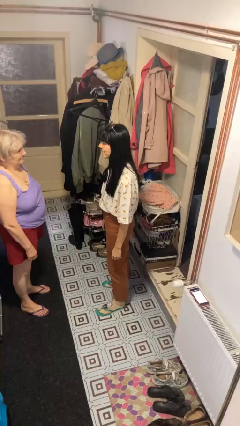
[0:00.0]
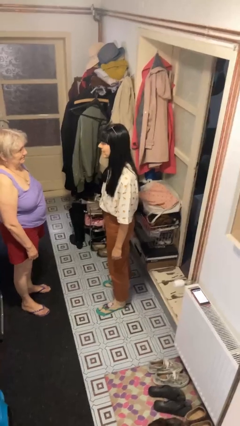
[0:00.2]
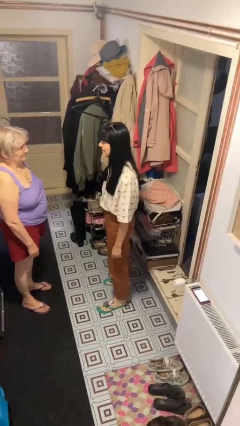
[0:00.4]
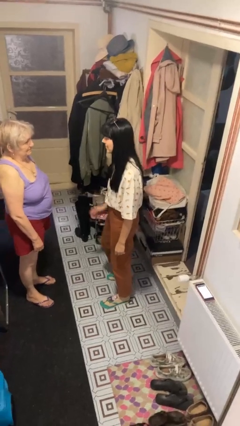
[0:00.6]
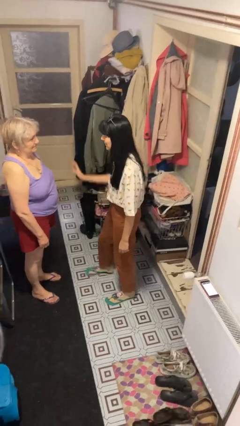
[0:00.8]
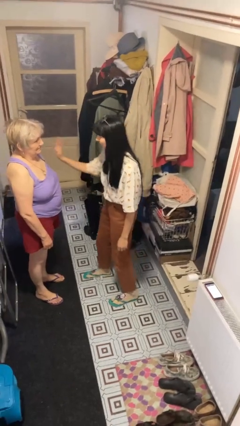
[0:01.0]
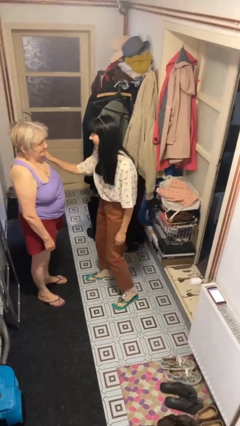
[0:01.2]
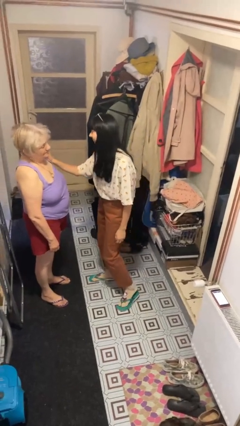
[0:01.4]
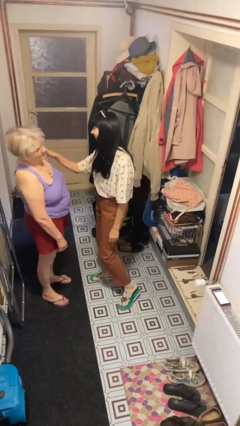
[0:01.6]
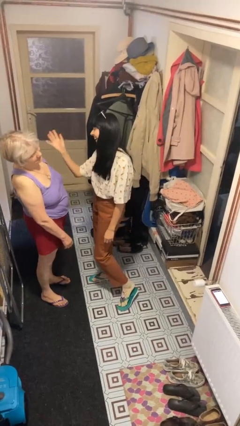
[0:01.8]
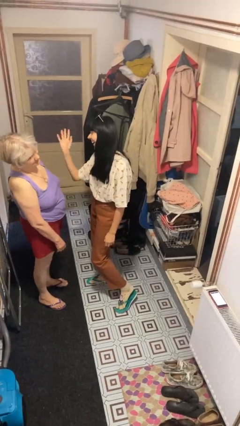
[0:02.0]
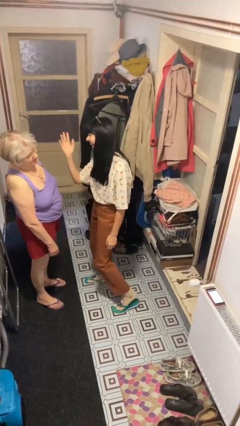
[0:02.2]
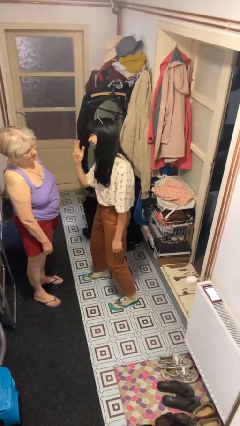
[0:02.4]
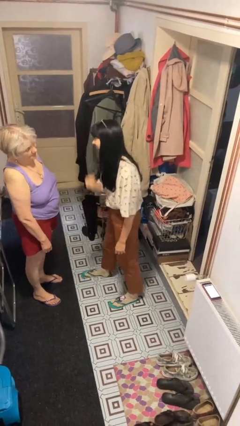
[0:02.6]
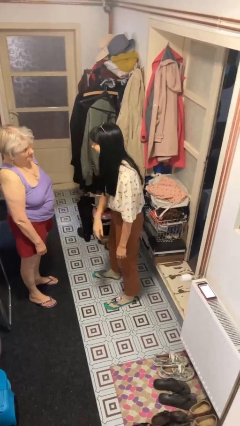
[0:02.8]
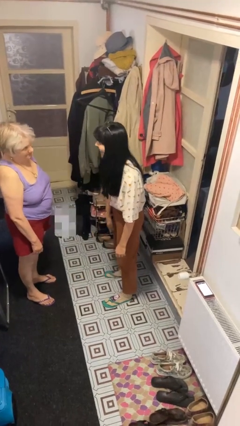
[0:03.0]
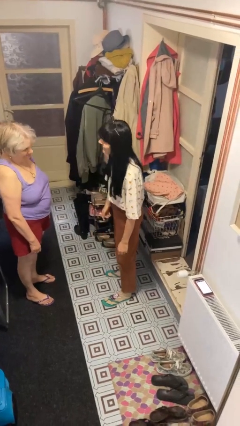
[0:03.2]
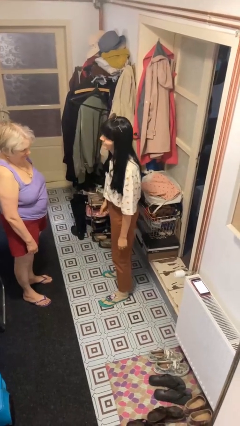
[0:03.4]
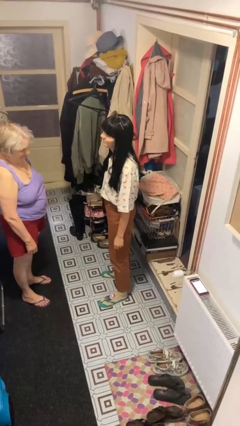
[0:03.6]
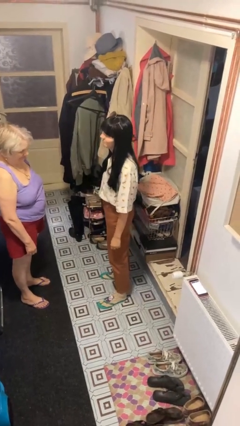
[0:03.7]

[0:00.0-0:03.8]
person shoves person

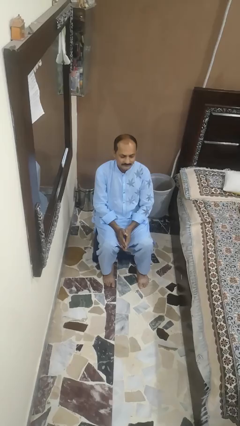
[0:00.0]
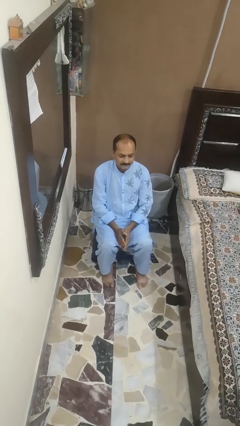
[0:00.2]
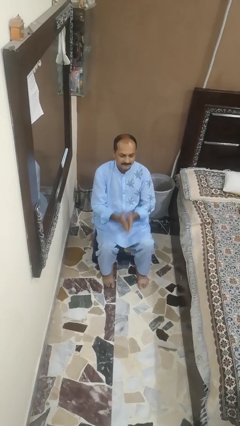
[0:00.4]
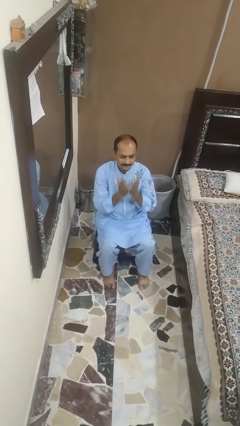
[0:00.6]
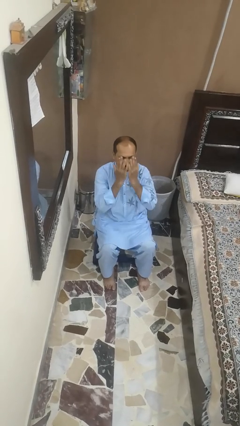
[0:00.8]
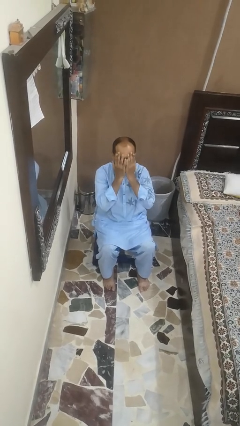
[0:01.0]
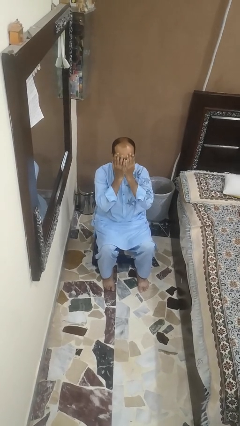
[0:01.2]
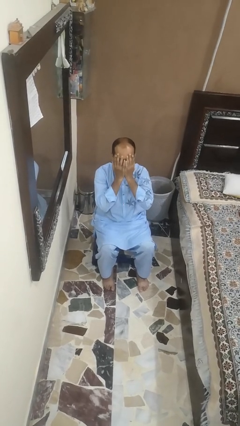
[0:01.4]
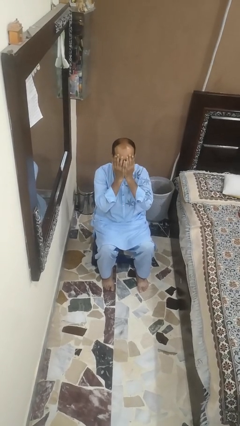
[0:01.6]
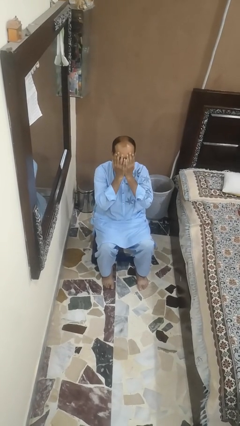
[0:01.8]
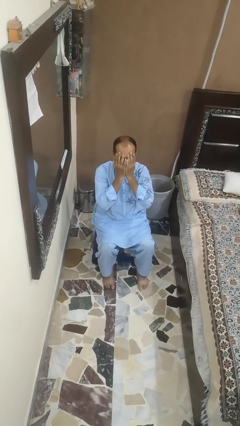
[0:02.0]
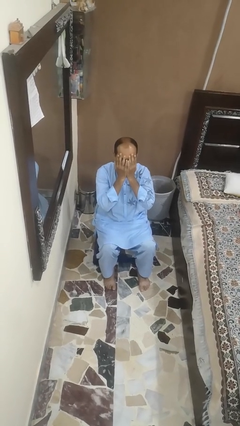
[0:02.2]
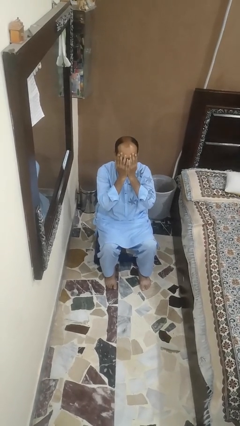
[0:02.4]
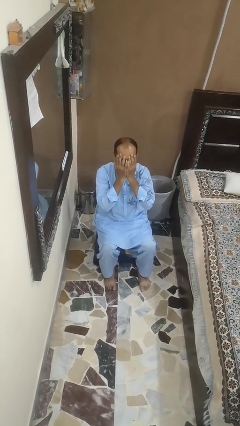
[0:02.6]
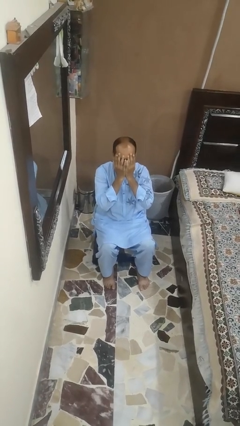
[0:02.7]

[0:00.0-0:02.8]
person covers face with hands

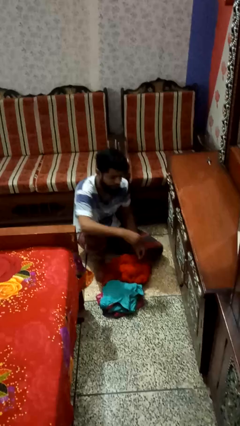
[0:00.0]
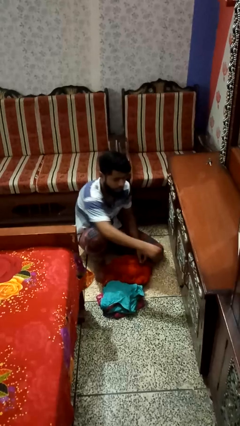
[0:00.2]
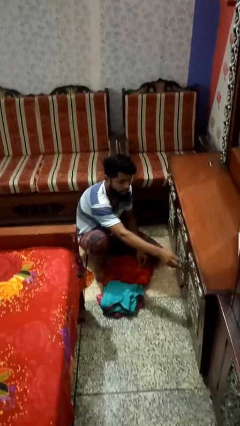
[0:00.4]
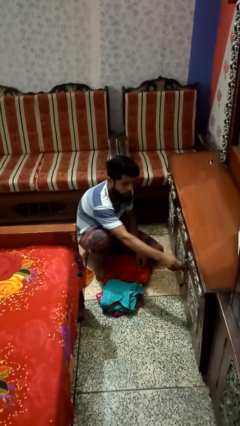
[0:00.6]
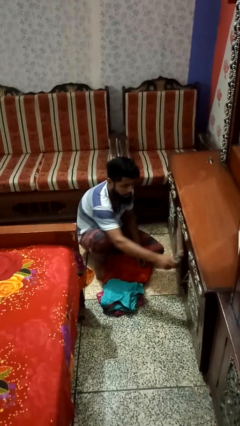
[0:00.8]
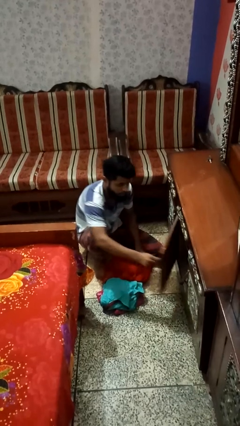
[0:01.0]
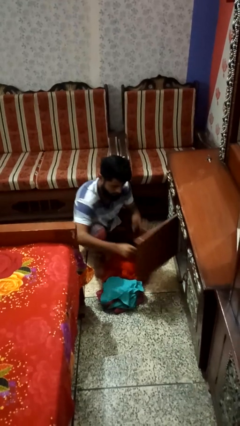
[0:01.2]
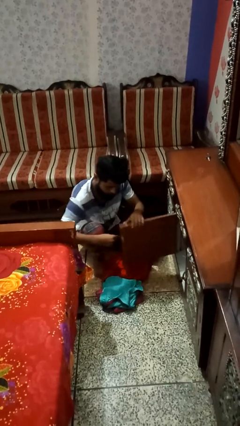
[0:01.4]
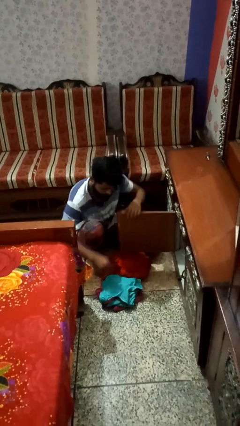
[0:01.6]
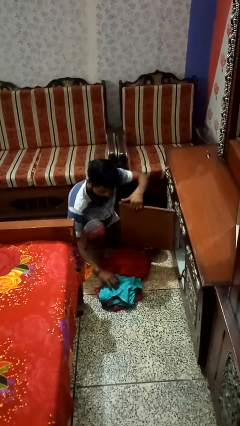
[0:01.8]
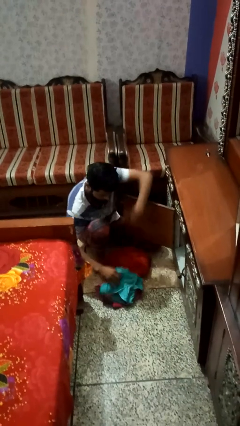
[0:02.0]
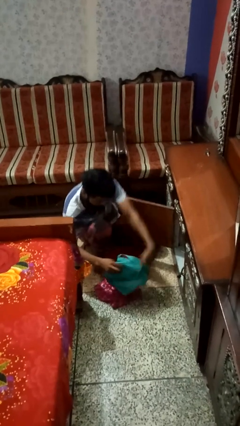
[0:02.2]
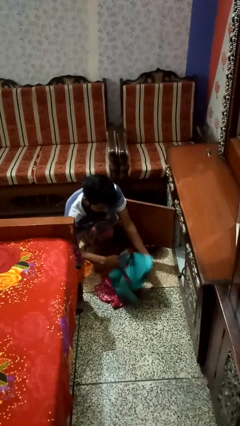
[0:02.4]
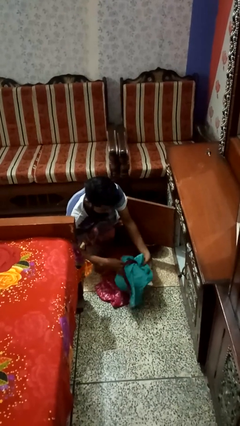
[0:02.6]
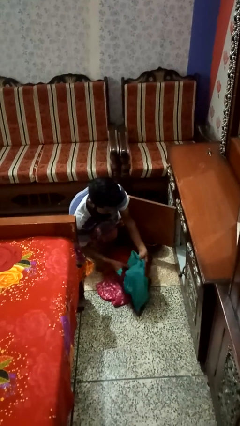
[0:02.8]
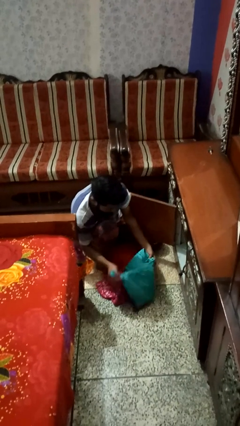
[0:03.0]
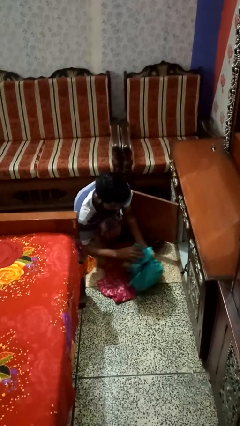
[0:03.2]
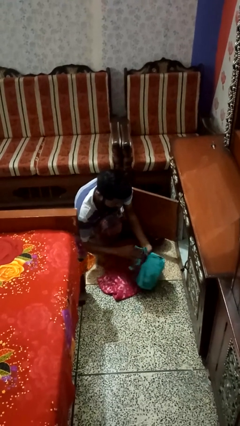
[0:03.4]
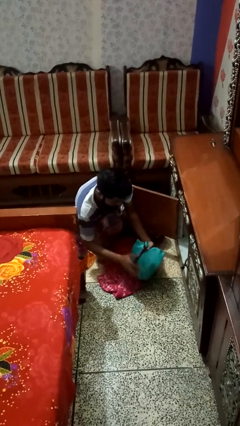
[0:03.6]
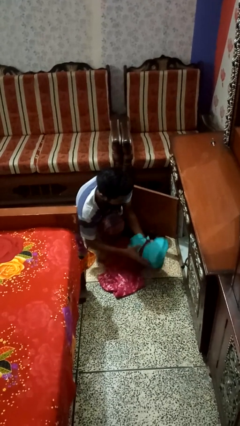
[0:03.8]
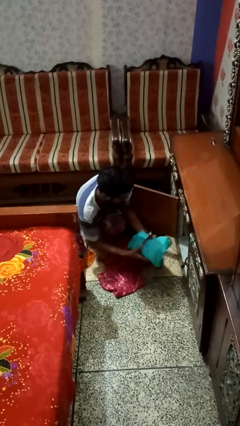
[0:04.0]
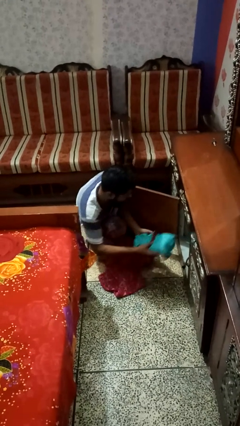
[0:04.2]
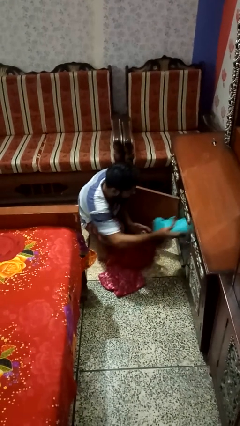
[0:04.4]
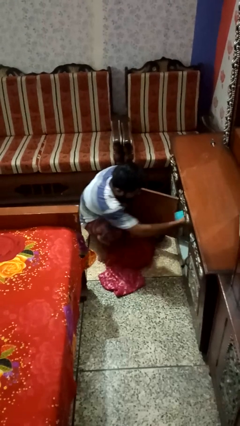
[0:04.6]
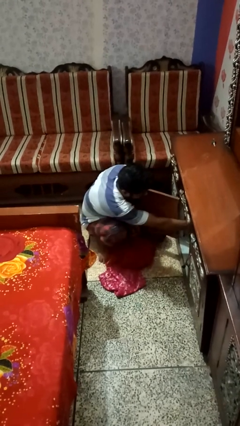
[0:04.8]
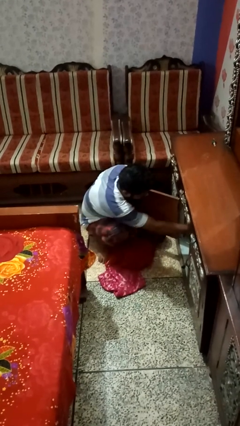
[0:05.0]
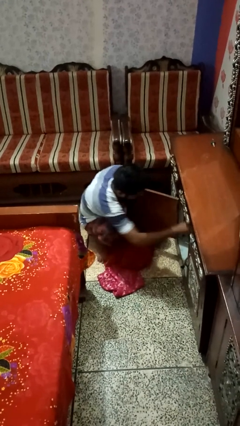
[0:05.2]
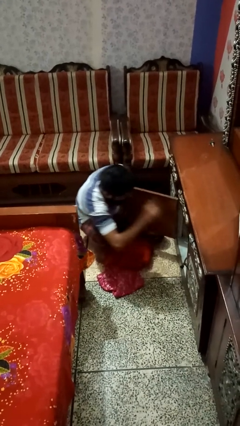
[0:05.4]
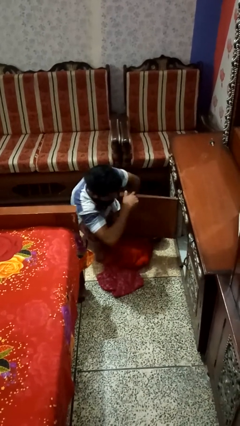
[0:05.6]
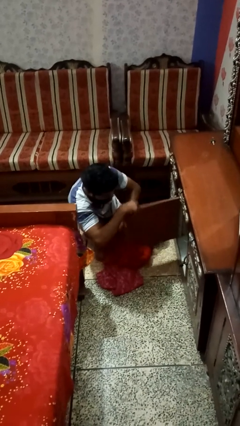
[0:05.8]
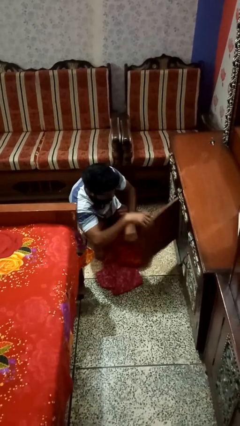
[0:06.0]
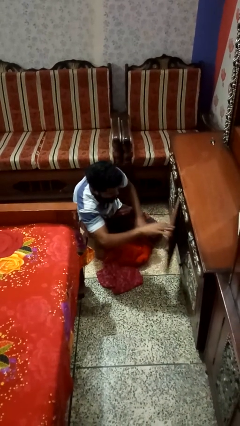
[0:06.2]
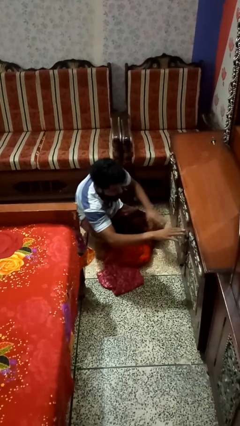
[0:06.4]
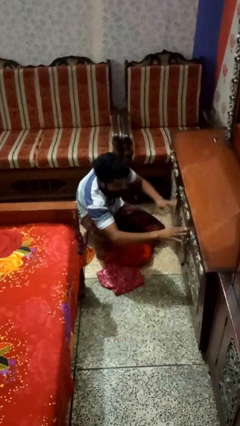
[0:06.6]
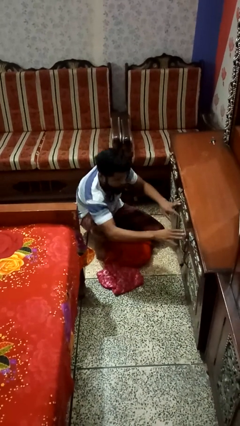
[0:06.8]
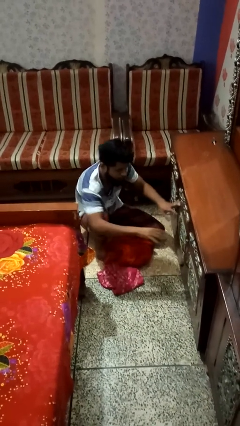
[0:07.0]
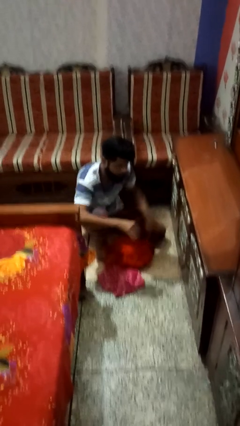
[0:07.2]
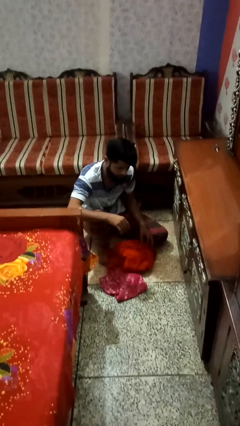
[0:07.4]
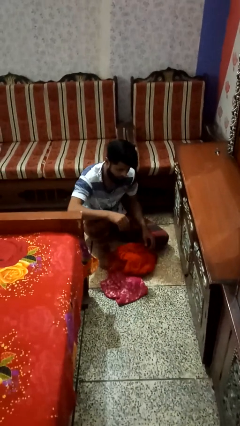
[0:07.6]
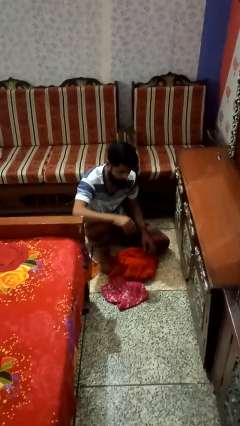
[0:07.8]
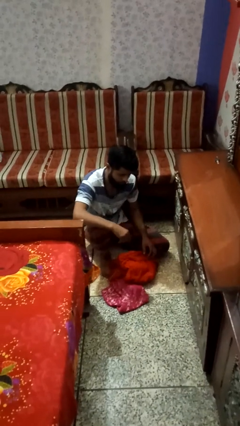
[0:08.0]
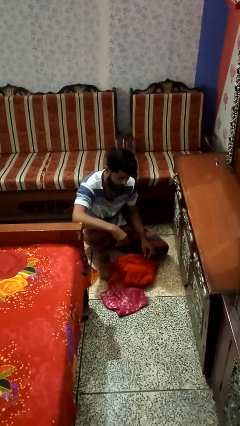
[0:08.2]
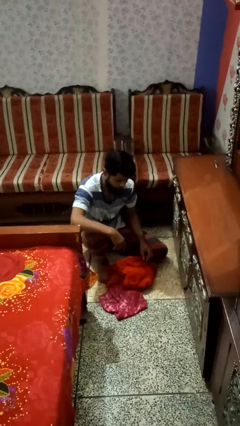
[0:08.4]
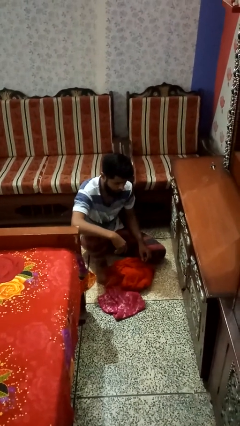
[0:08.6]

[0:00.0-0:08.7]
person puts clothes into dresser

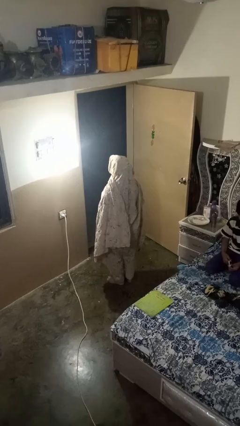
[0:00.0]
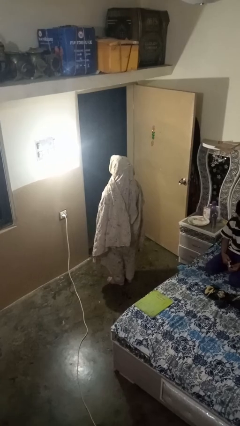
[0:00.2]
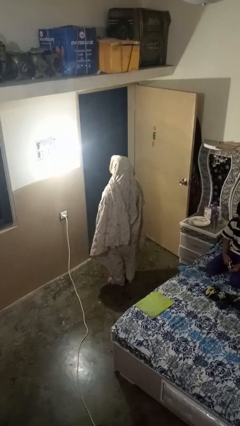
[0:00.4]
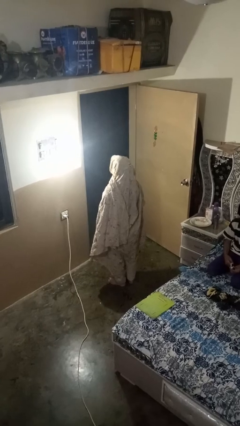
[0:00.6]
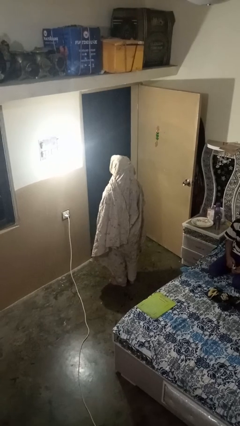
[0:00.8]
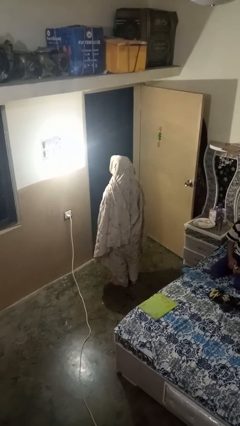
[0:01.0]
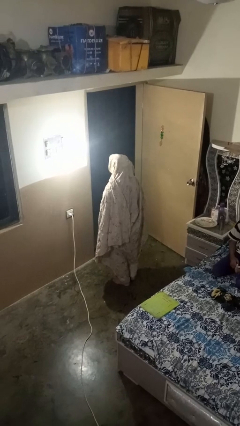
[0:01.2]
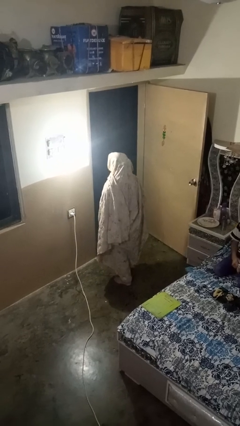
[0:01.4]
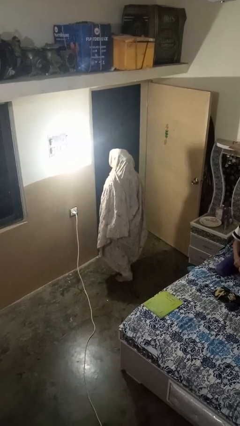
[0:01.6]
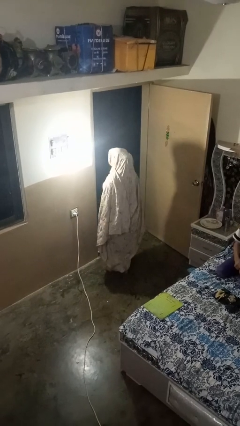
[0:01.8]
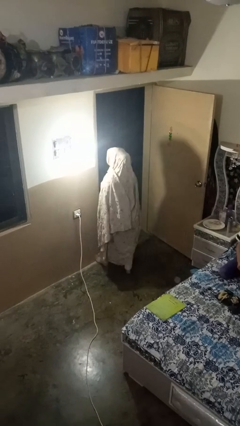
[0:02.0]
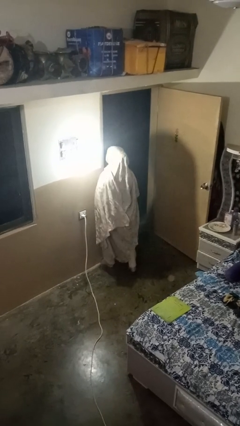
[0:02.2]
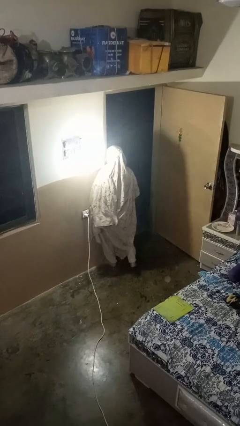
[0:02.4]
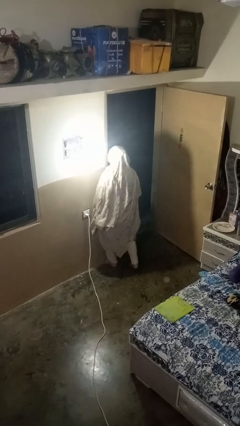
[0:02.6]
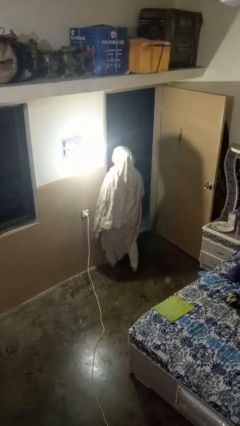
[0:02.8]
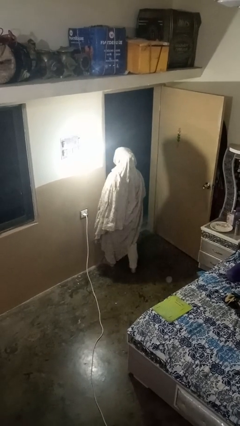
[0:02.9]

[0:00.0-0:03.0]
person bumps into wall
